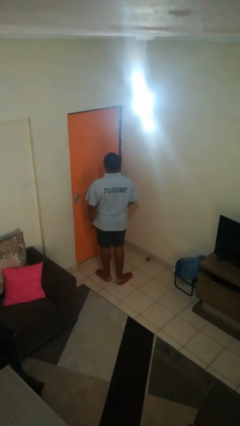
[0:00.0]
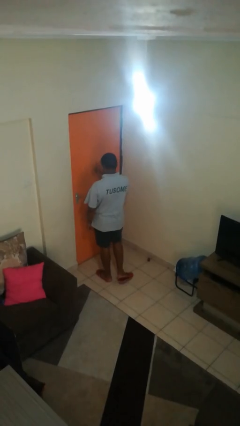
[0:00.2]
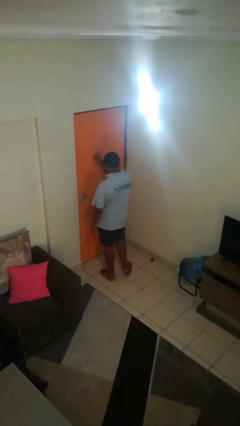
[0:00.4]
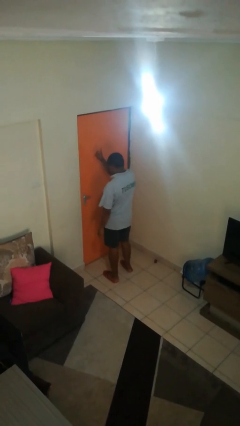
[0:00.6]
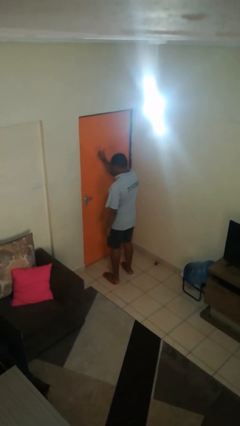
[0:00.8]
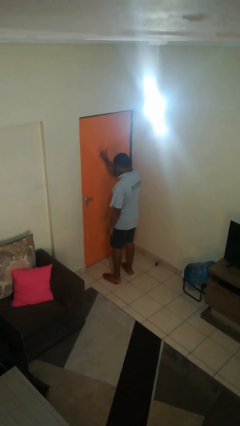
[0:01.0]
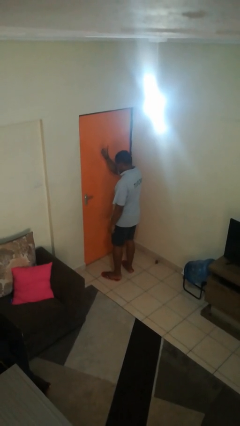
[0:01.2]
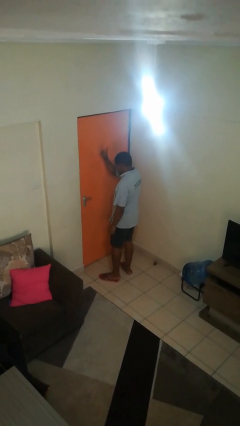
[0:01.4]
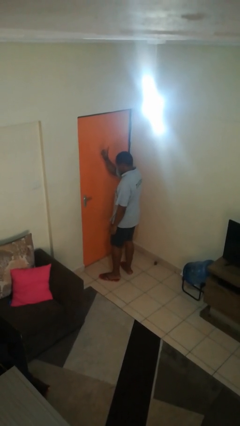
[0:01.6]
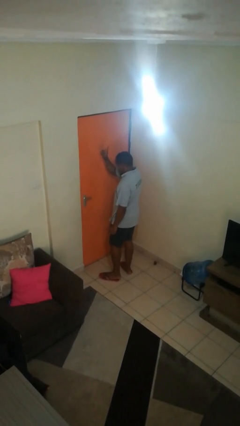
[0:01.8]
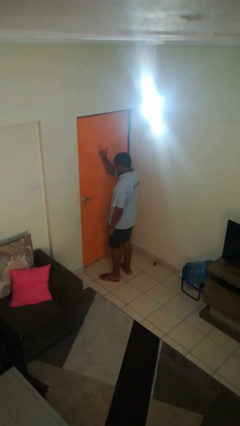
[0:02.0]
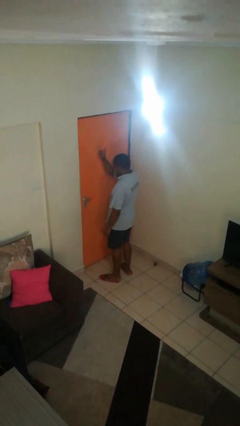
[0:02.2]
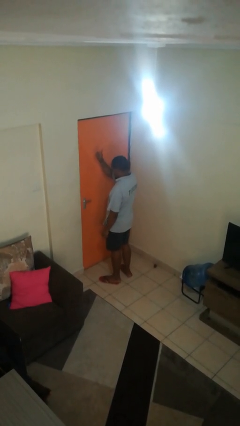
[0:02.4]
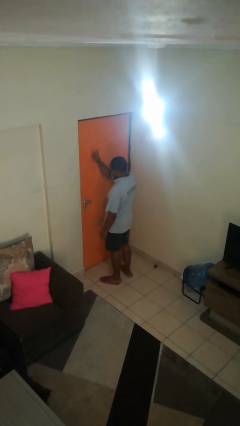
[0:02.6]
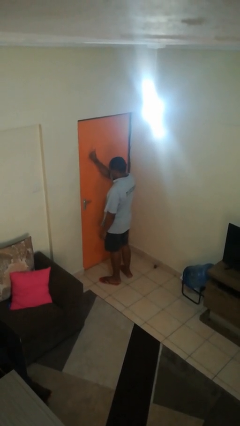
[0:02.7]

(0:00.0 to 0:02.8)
person gestures number one

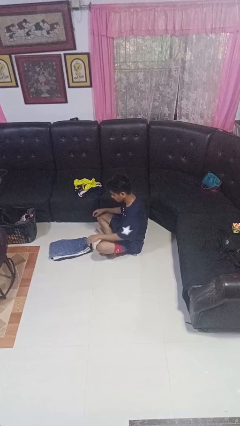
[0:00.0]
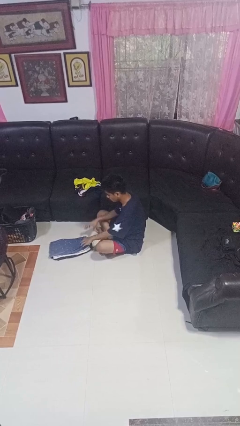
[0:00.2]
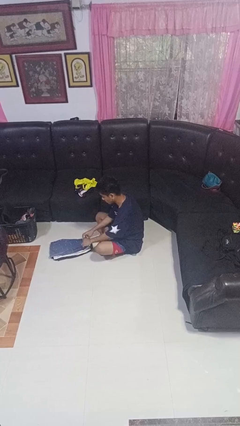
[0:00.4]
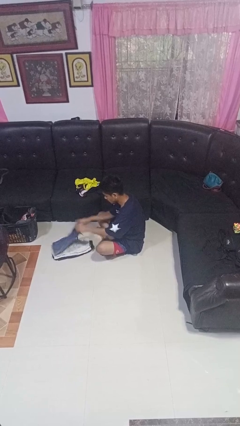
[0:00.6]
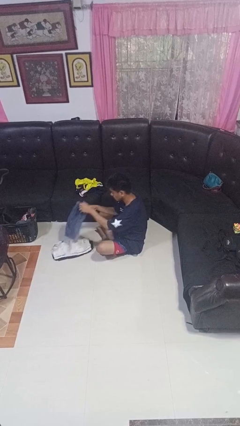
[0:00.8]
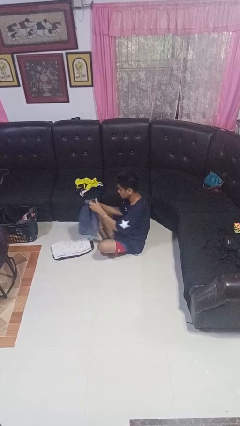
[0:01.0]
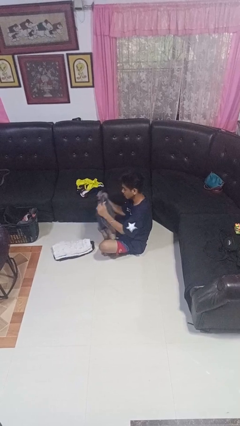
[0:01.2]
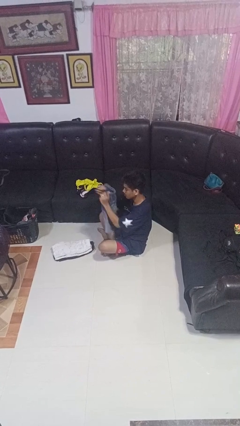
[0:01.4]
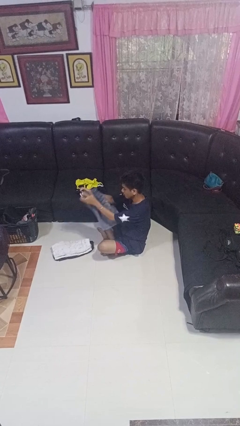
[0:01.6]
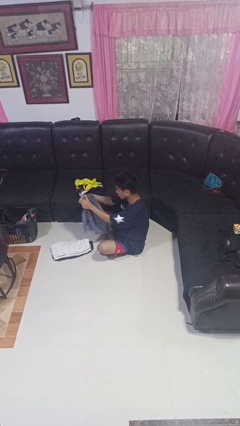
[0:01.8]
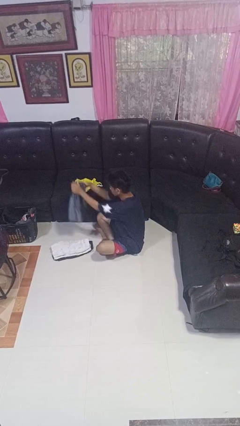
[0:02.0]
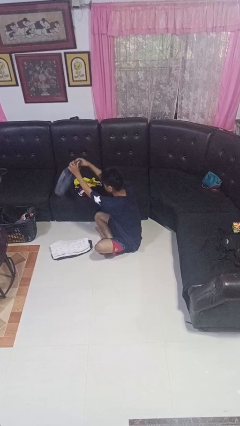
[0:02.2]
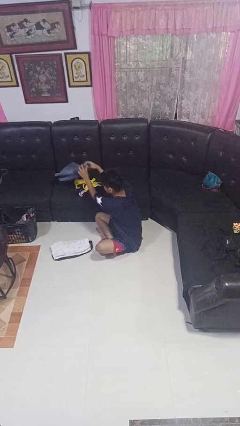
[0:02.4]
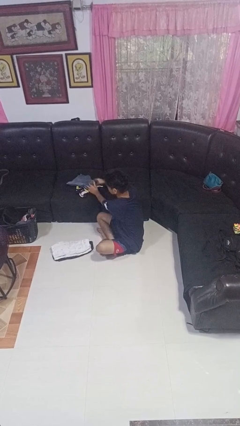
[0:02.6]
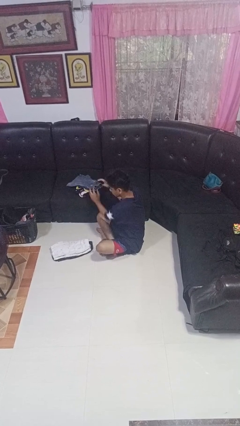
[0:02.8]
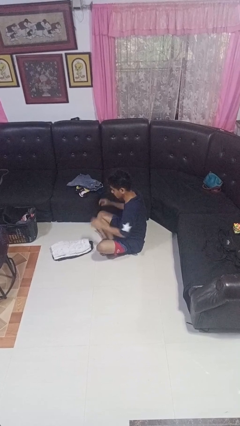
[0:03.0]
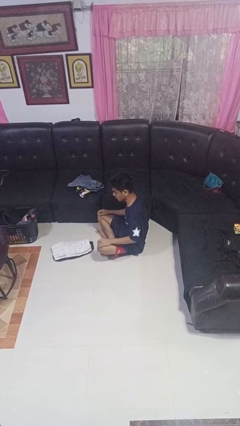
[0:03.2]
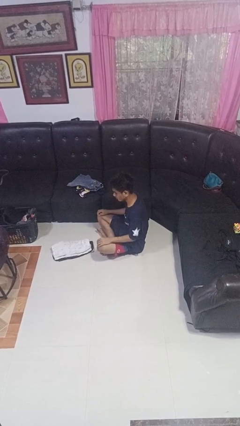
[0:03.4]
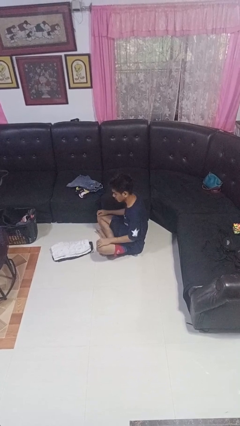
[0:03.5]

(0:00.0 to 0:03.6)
person folds pants

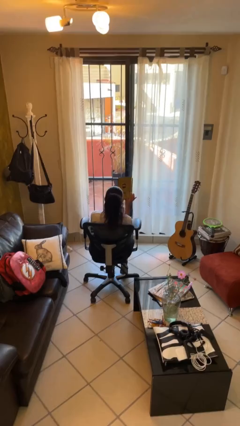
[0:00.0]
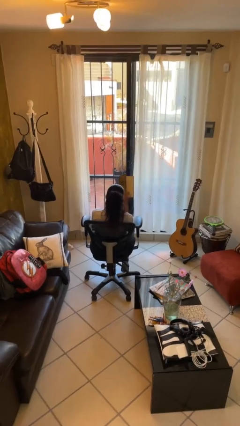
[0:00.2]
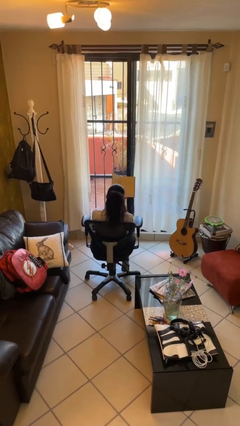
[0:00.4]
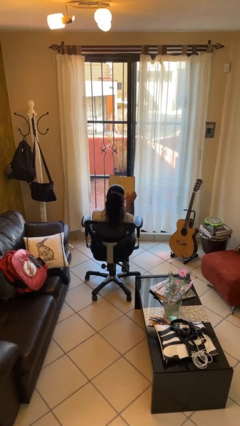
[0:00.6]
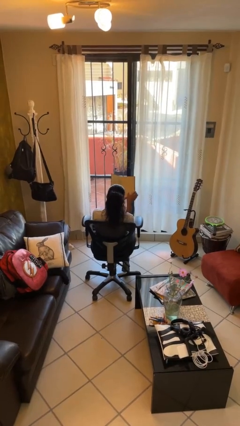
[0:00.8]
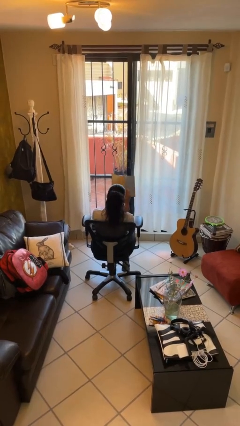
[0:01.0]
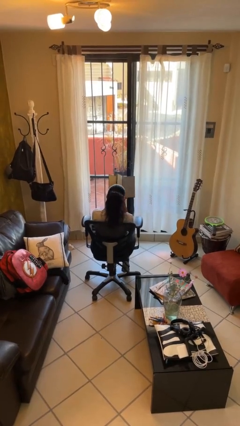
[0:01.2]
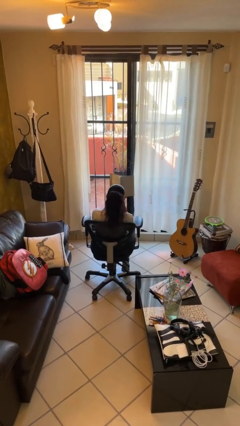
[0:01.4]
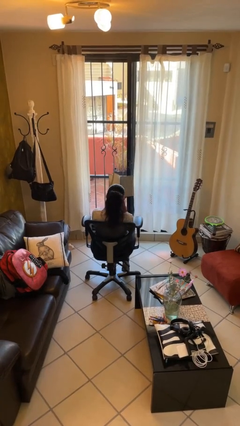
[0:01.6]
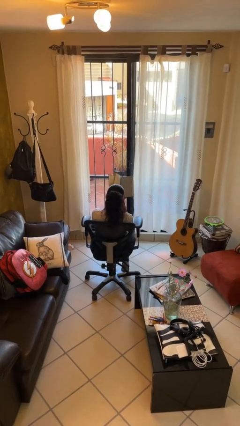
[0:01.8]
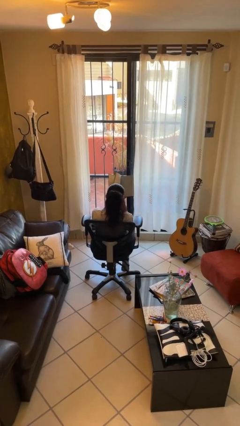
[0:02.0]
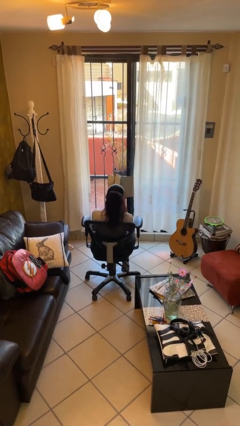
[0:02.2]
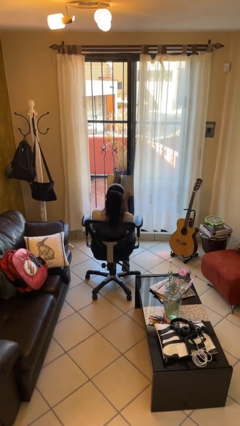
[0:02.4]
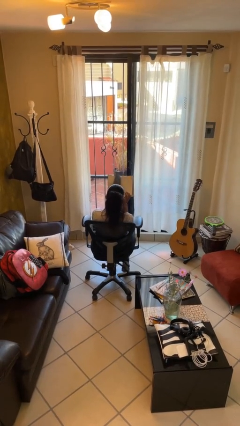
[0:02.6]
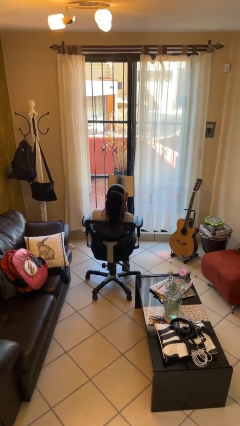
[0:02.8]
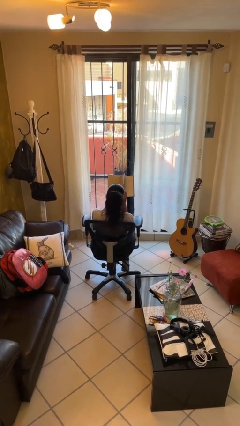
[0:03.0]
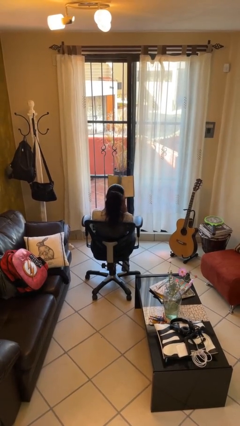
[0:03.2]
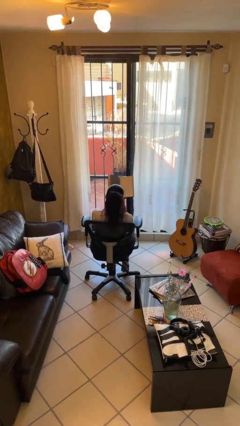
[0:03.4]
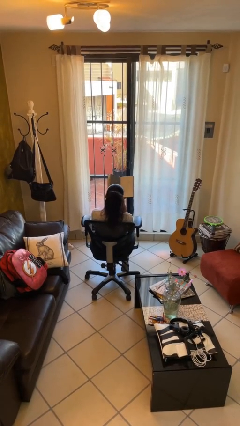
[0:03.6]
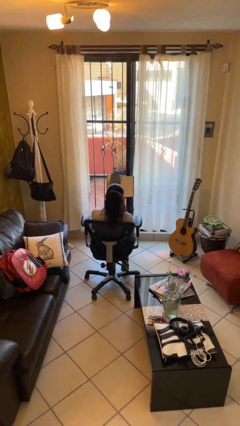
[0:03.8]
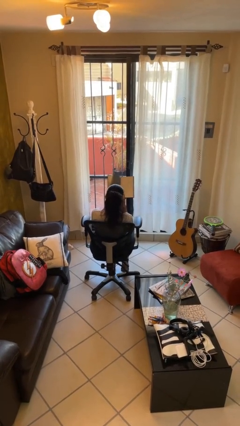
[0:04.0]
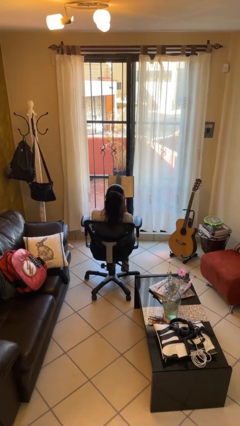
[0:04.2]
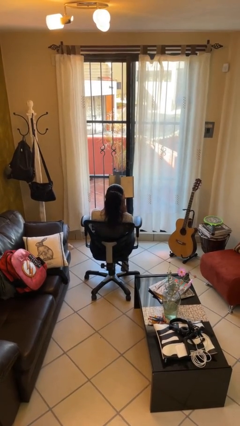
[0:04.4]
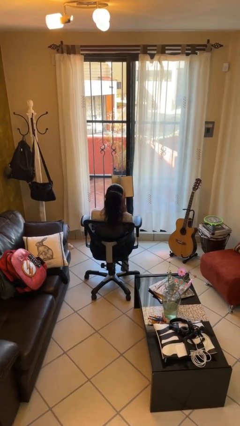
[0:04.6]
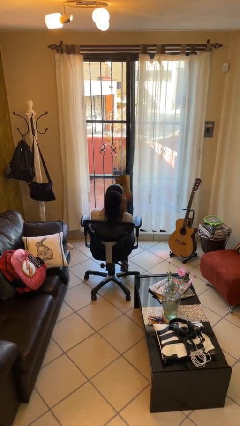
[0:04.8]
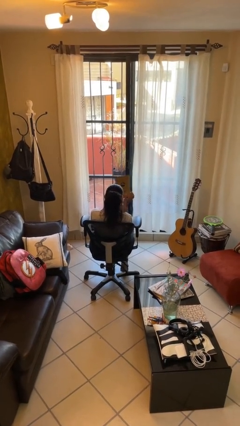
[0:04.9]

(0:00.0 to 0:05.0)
person reads book

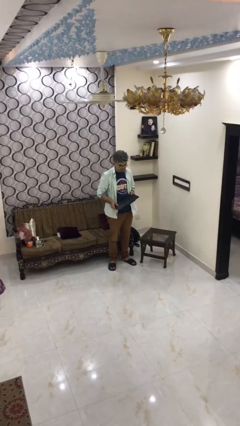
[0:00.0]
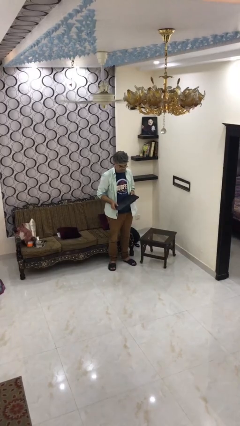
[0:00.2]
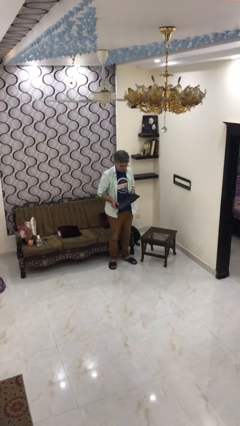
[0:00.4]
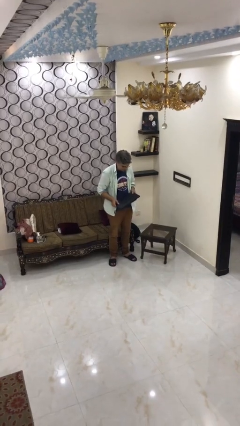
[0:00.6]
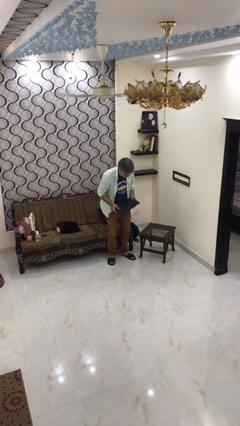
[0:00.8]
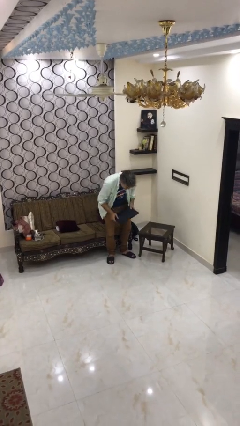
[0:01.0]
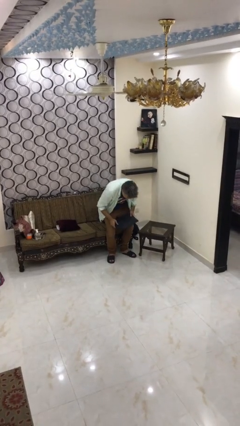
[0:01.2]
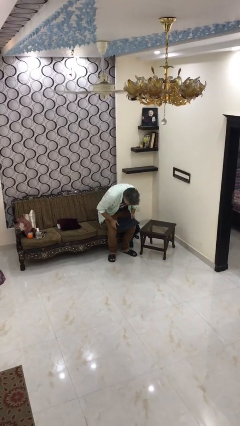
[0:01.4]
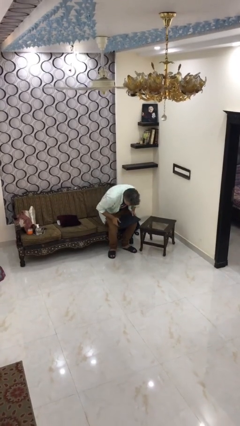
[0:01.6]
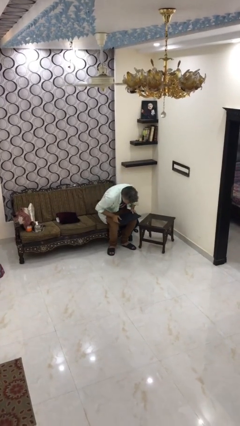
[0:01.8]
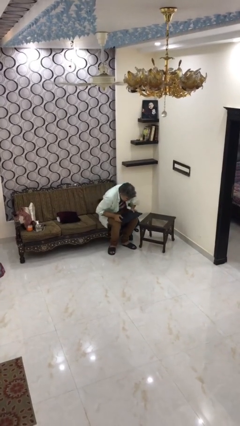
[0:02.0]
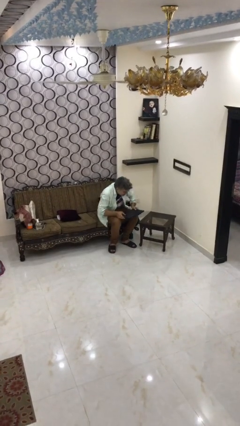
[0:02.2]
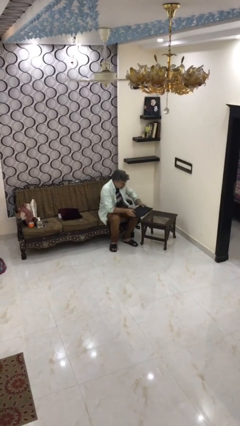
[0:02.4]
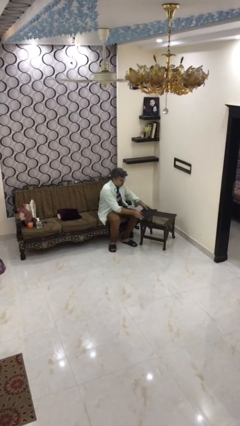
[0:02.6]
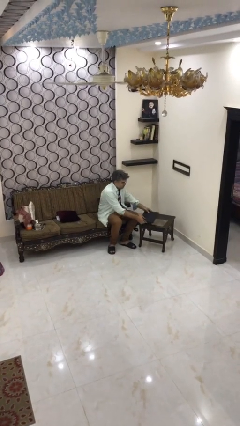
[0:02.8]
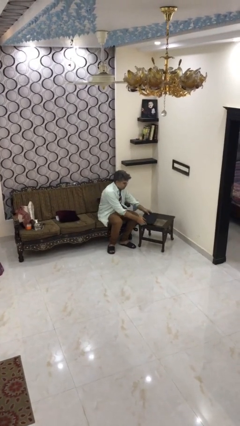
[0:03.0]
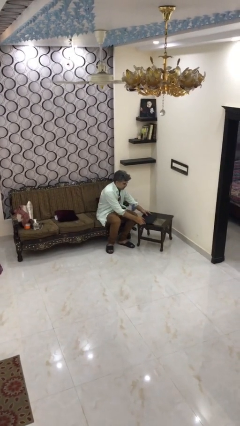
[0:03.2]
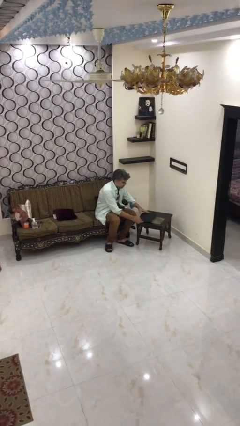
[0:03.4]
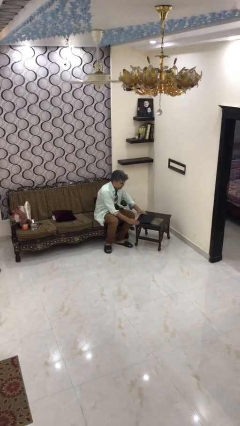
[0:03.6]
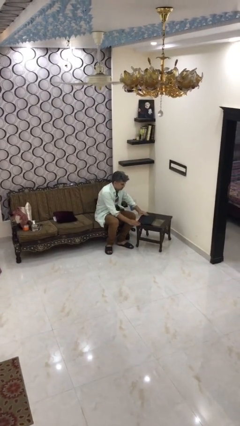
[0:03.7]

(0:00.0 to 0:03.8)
person sits down

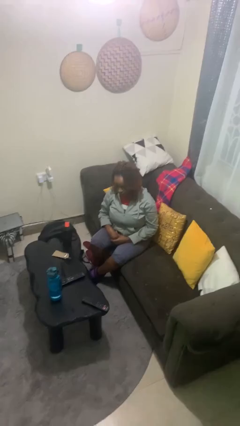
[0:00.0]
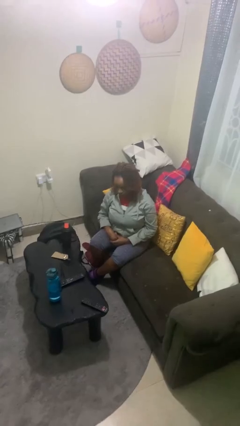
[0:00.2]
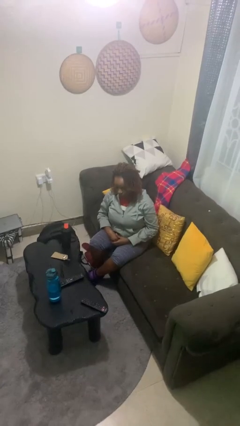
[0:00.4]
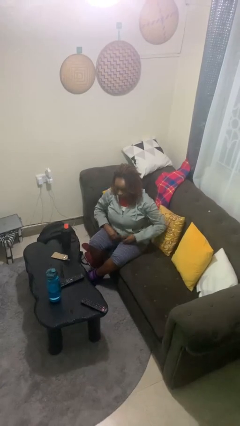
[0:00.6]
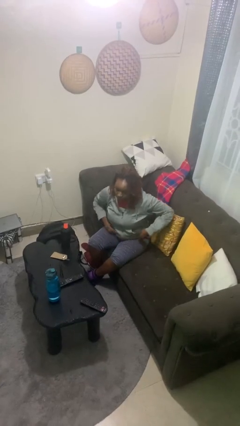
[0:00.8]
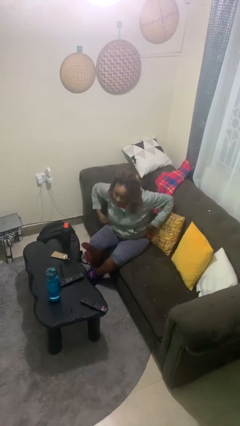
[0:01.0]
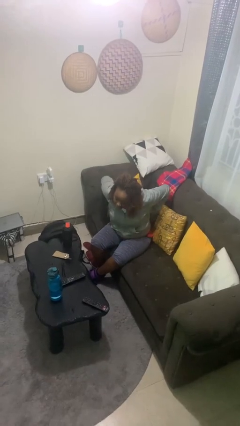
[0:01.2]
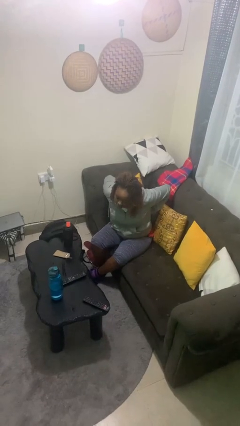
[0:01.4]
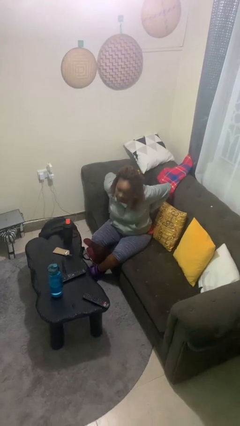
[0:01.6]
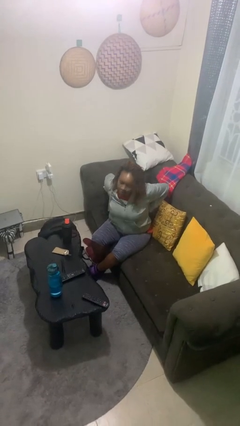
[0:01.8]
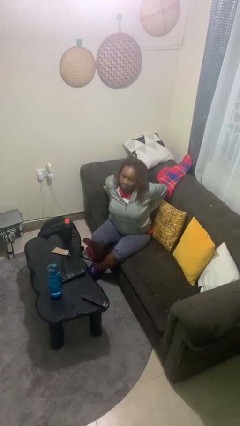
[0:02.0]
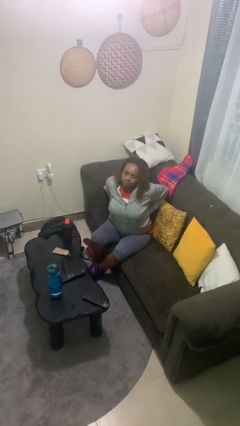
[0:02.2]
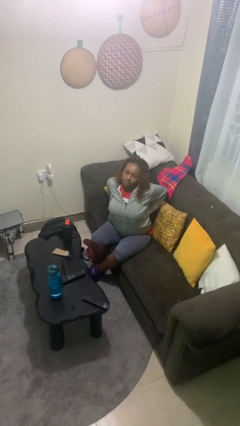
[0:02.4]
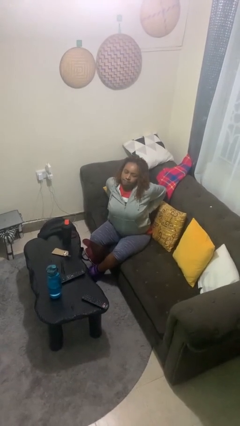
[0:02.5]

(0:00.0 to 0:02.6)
person stretches back
